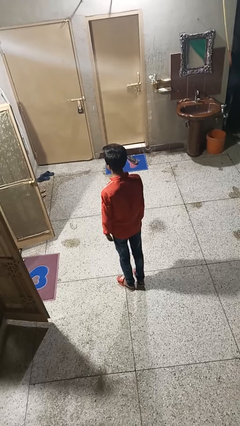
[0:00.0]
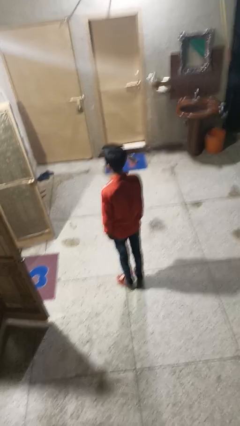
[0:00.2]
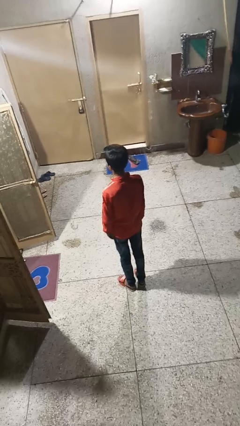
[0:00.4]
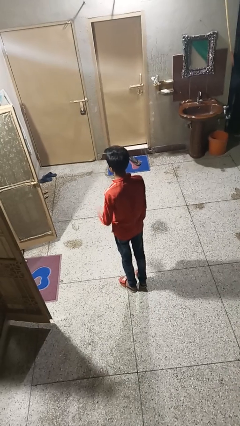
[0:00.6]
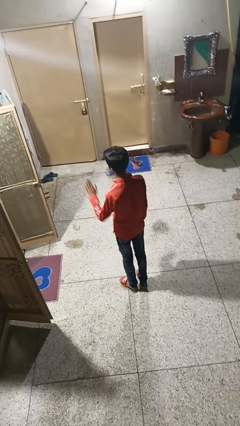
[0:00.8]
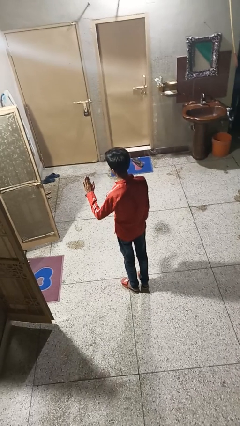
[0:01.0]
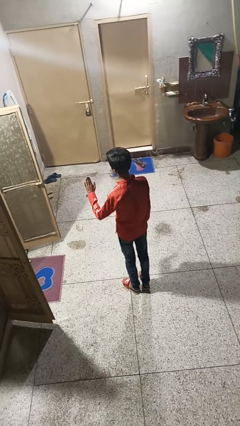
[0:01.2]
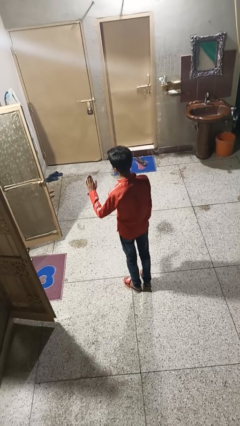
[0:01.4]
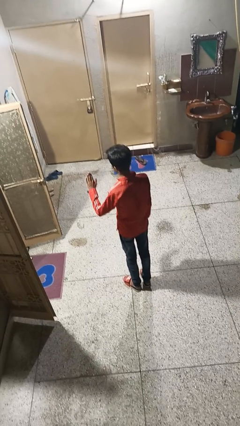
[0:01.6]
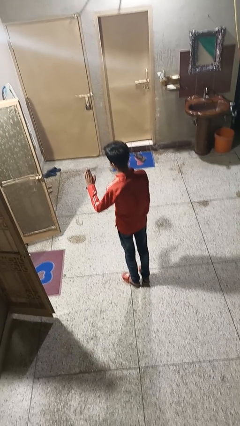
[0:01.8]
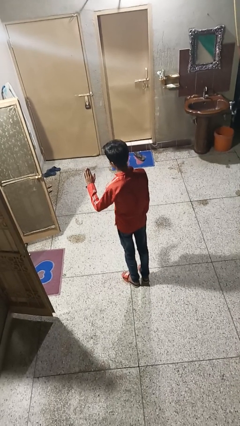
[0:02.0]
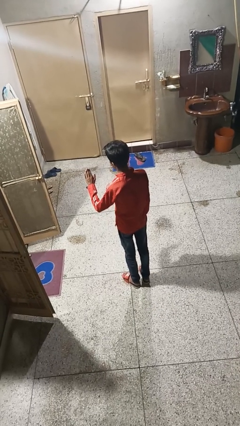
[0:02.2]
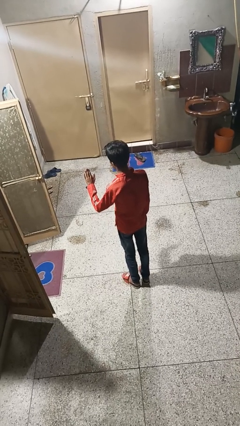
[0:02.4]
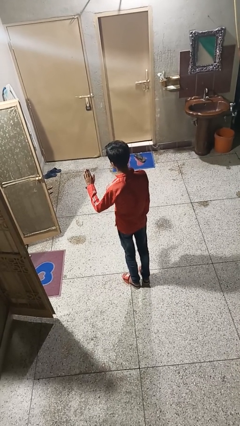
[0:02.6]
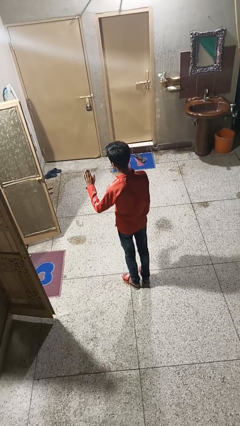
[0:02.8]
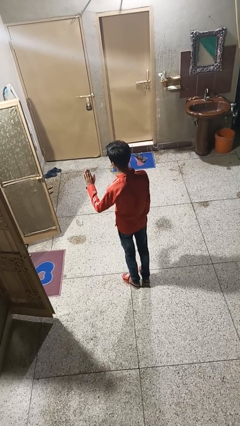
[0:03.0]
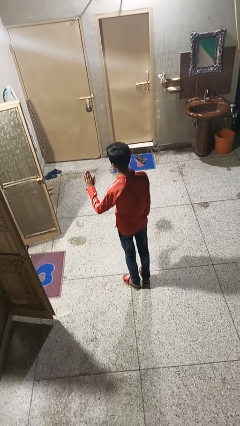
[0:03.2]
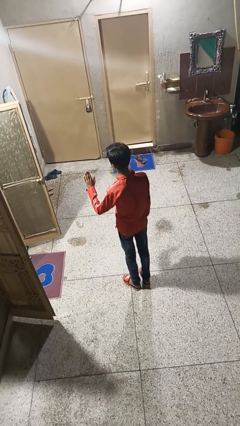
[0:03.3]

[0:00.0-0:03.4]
person gestures stop

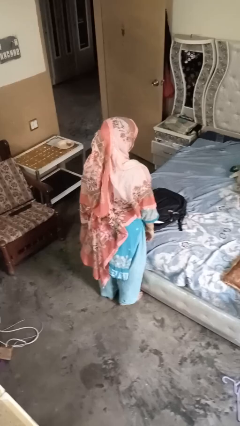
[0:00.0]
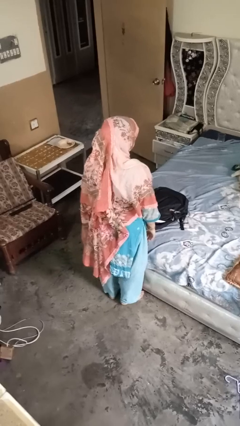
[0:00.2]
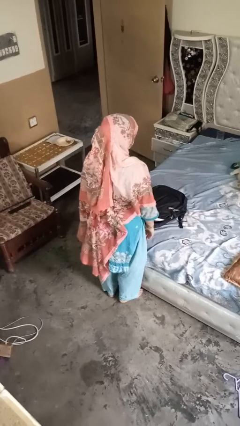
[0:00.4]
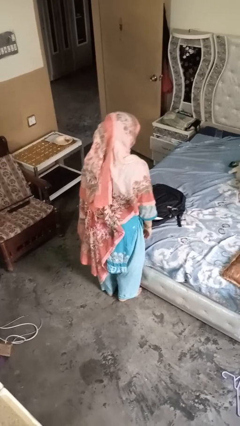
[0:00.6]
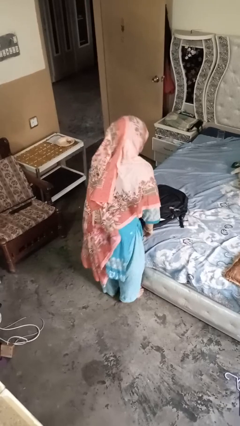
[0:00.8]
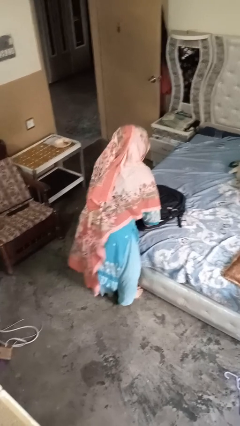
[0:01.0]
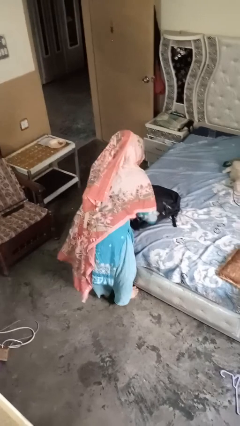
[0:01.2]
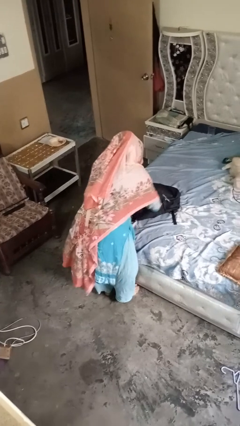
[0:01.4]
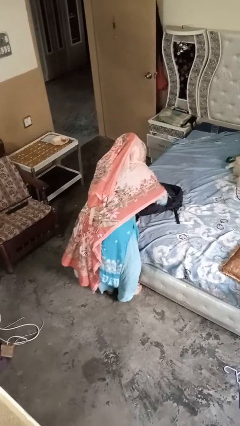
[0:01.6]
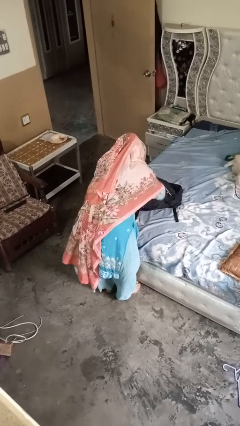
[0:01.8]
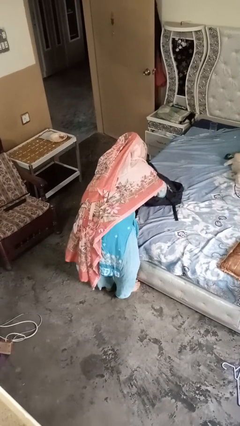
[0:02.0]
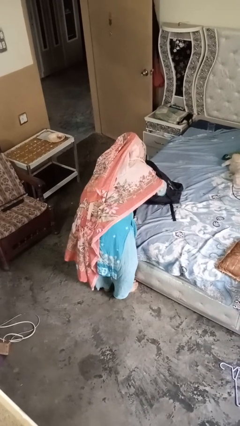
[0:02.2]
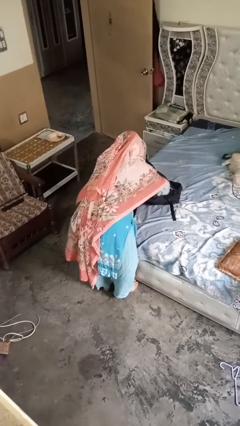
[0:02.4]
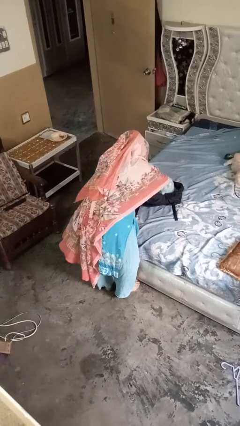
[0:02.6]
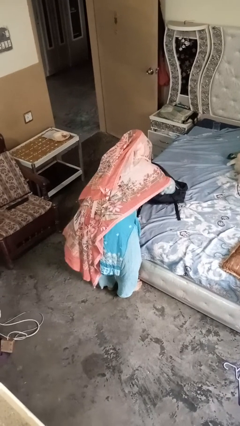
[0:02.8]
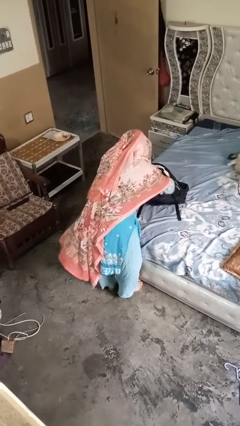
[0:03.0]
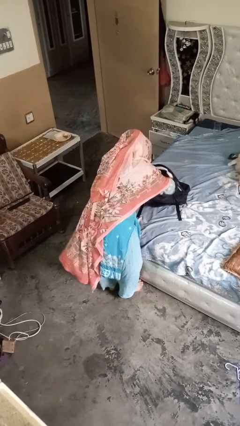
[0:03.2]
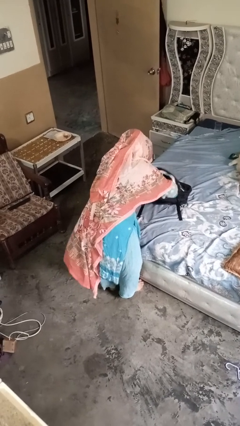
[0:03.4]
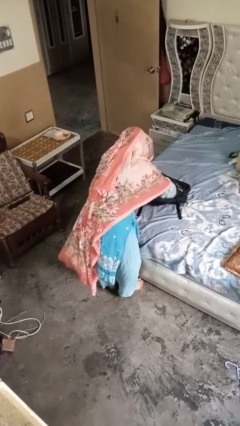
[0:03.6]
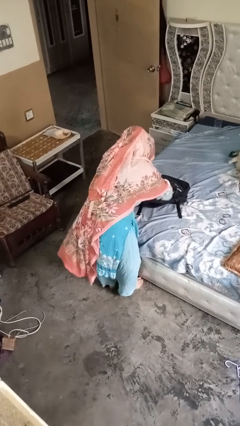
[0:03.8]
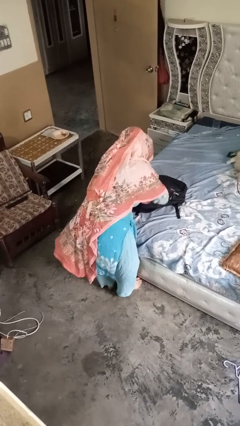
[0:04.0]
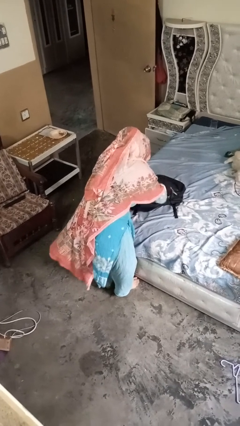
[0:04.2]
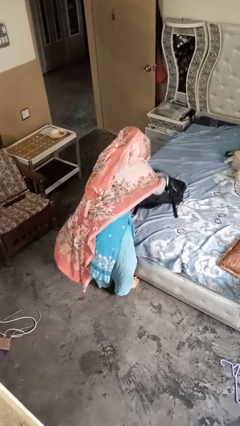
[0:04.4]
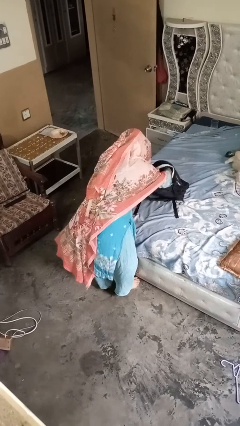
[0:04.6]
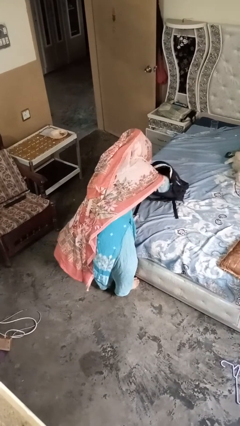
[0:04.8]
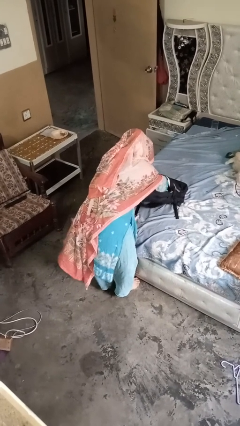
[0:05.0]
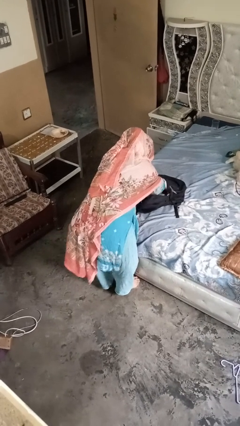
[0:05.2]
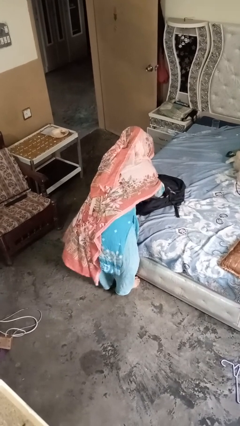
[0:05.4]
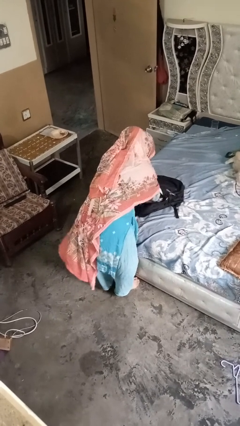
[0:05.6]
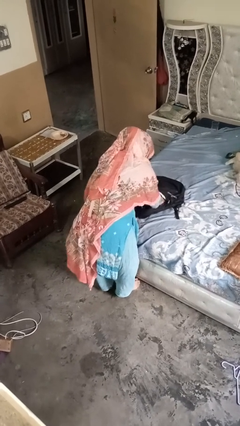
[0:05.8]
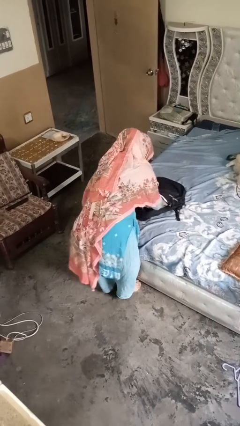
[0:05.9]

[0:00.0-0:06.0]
person searches in bag

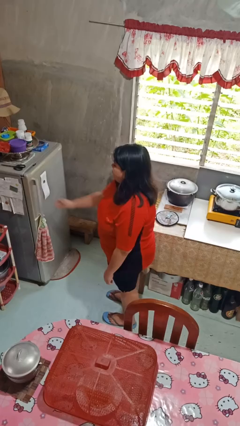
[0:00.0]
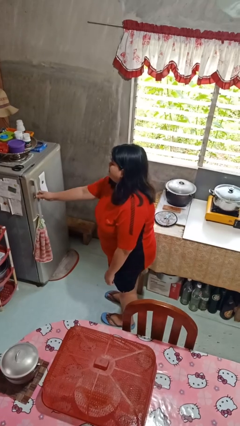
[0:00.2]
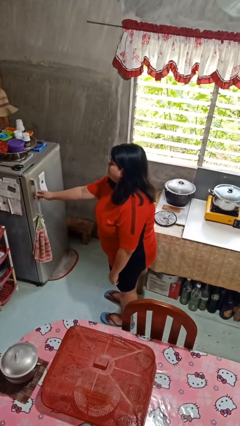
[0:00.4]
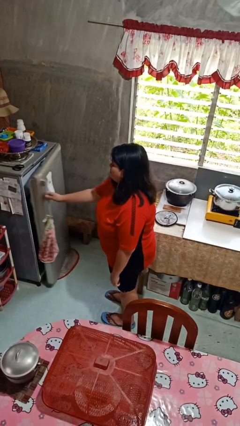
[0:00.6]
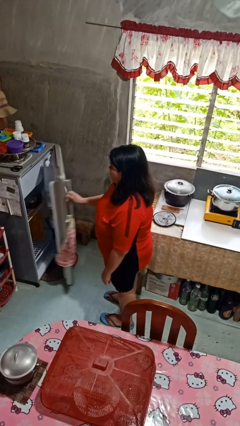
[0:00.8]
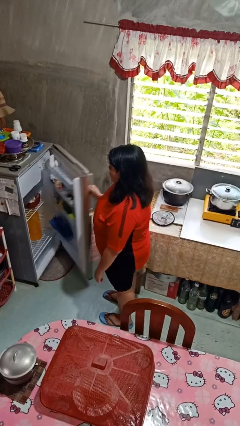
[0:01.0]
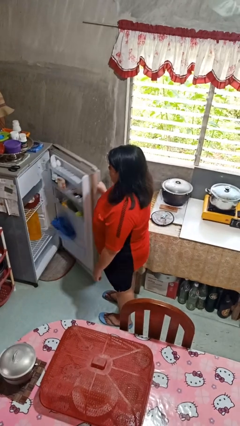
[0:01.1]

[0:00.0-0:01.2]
person opens refrigerator

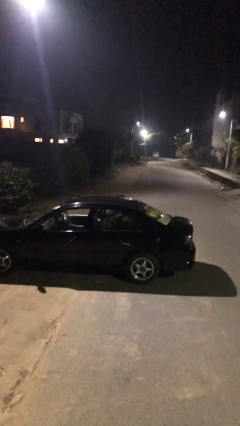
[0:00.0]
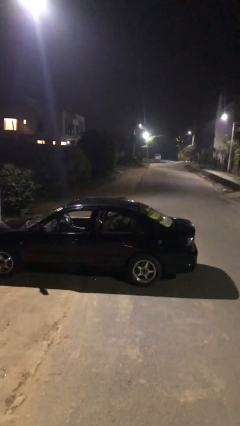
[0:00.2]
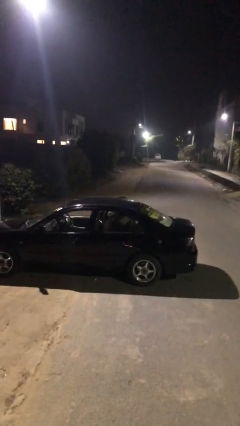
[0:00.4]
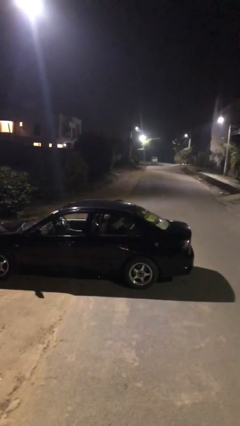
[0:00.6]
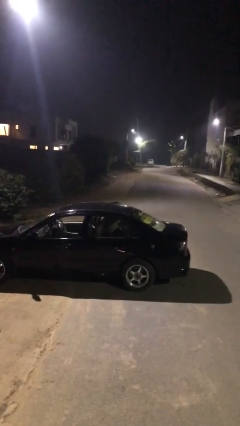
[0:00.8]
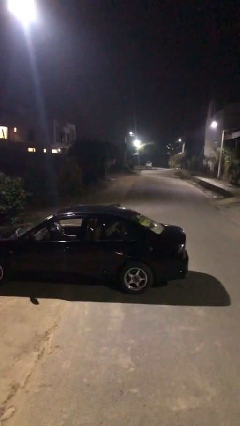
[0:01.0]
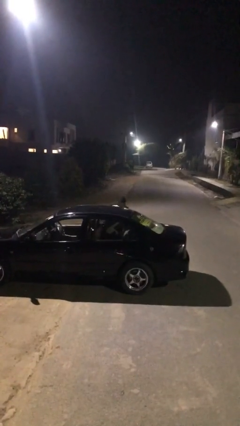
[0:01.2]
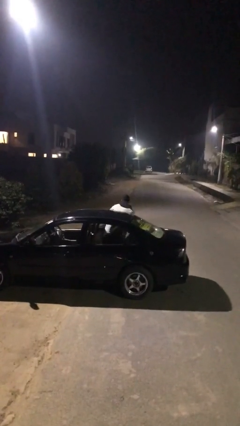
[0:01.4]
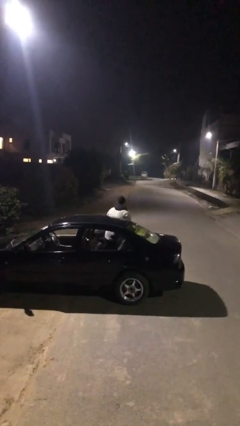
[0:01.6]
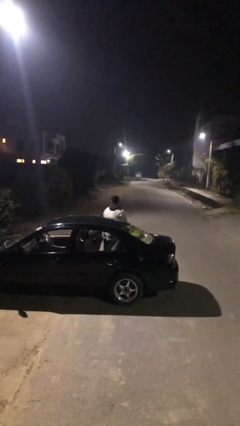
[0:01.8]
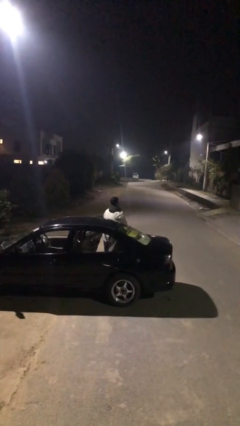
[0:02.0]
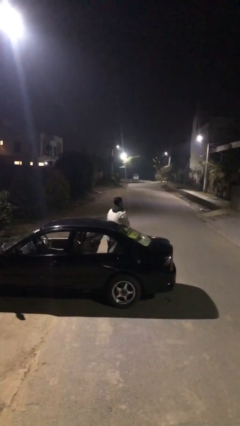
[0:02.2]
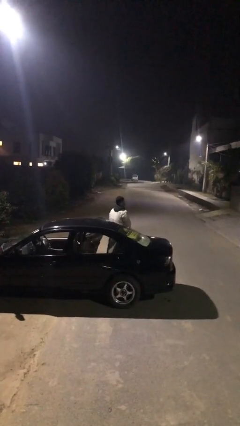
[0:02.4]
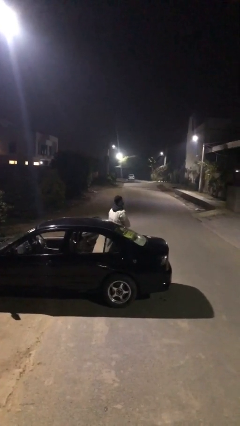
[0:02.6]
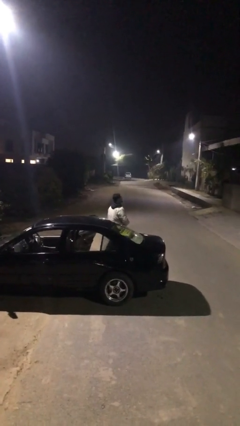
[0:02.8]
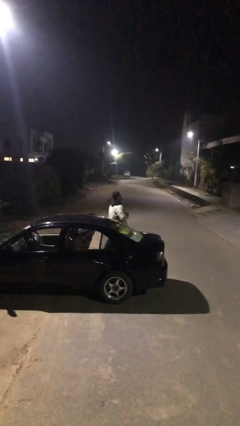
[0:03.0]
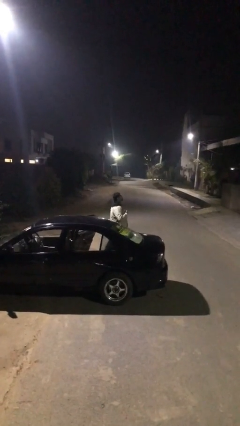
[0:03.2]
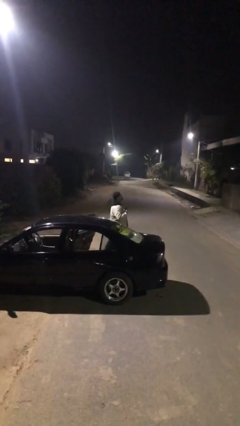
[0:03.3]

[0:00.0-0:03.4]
person exits car

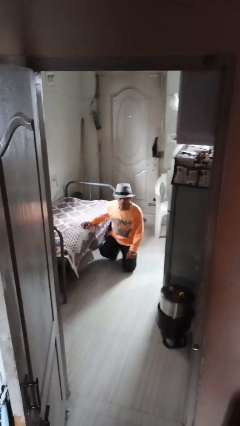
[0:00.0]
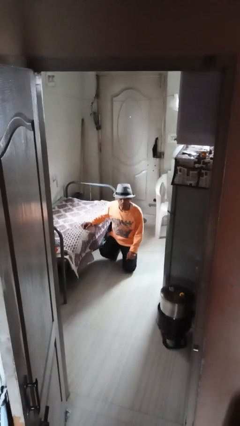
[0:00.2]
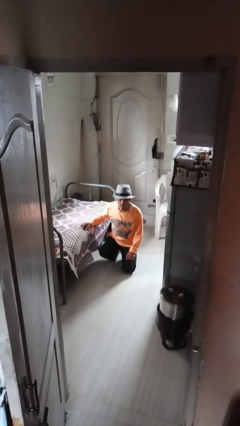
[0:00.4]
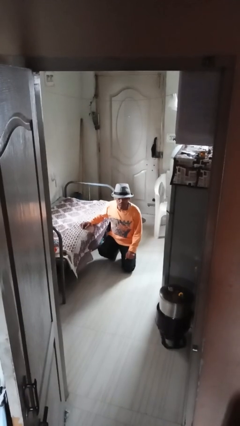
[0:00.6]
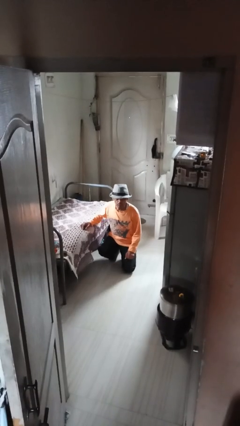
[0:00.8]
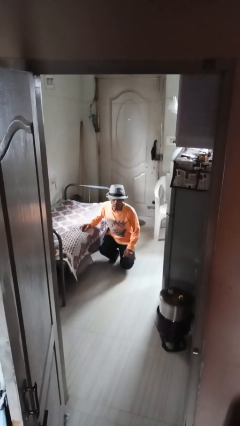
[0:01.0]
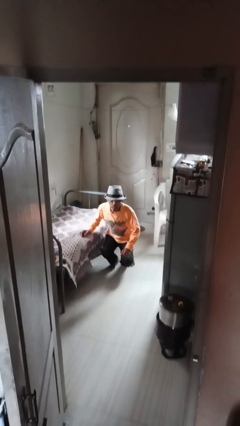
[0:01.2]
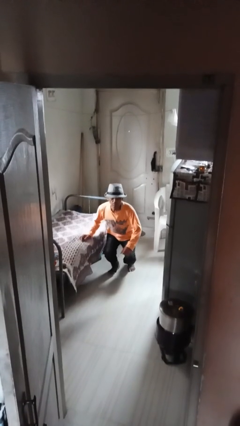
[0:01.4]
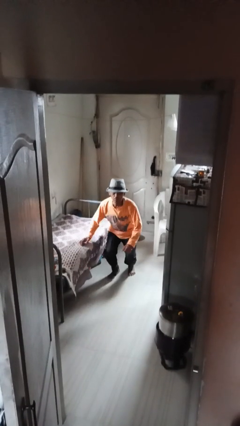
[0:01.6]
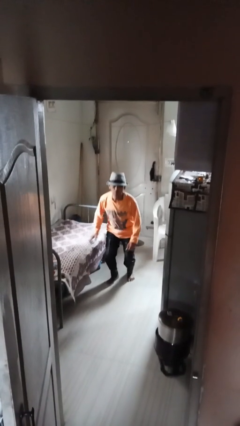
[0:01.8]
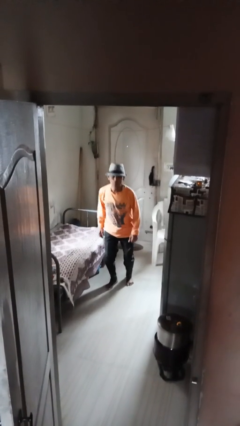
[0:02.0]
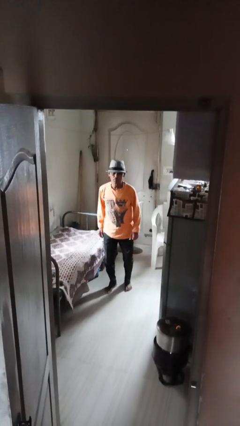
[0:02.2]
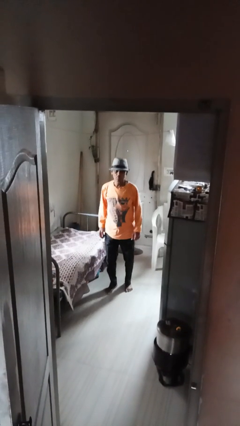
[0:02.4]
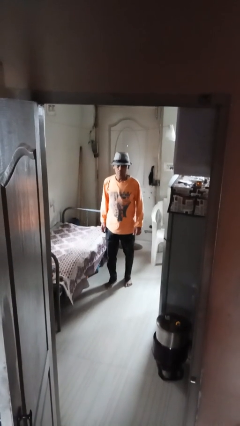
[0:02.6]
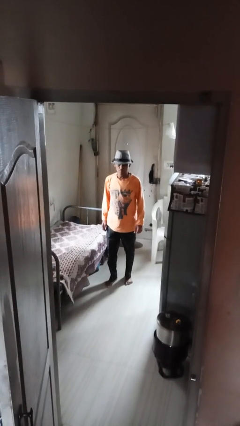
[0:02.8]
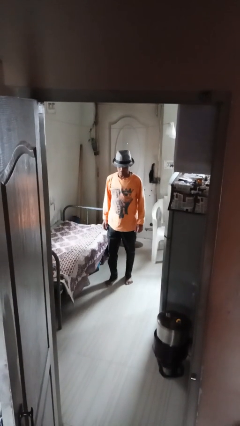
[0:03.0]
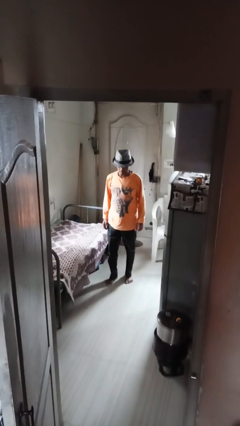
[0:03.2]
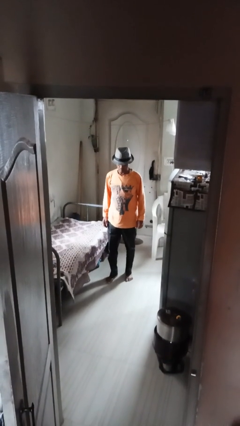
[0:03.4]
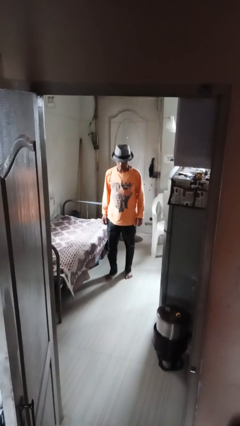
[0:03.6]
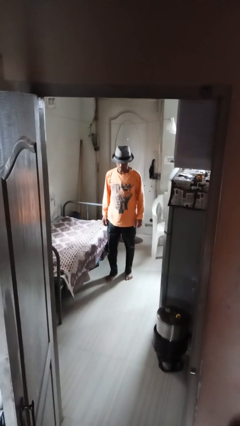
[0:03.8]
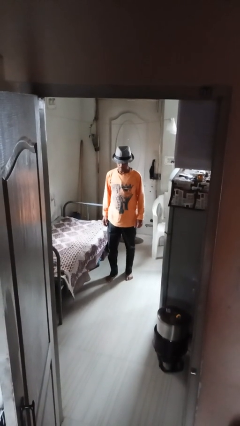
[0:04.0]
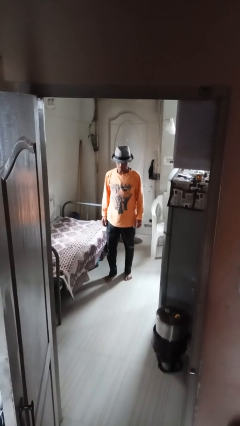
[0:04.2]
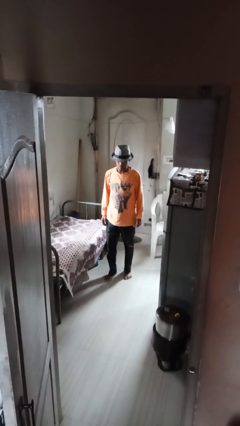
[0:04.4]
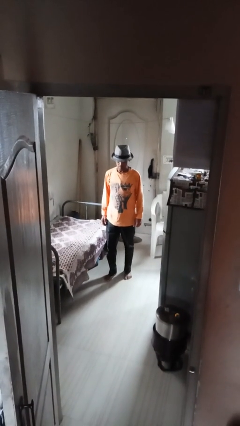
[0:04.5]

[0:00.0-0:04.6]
person stands up from floor
